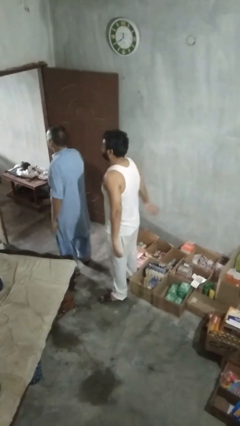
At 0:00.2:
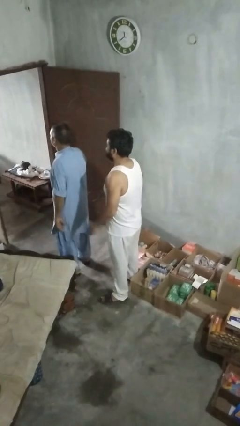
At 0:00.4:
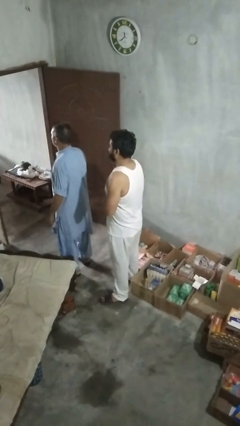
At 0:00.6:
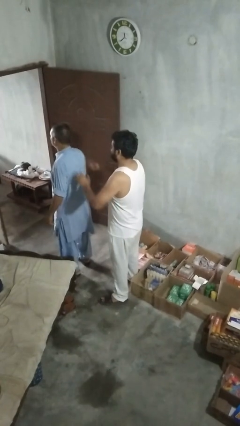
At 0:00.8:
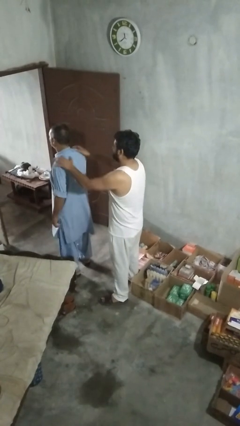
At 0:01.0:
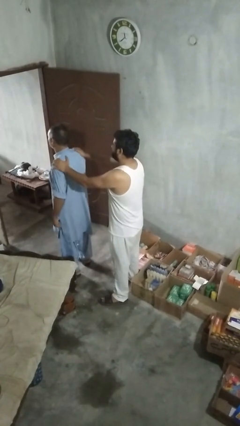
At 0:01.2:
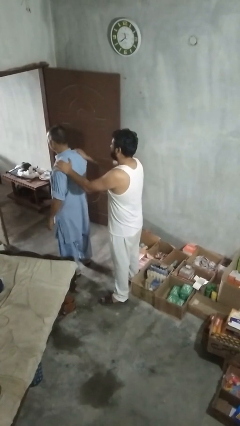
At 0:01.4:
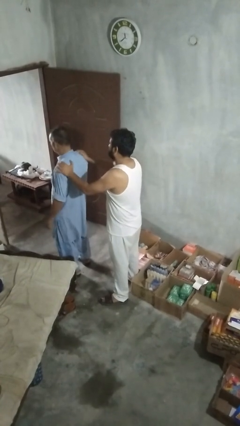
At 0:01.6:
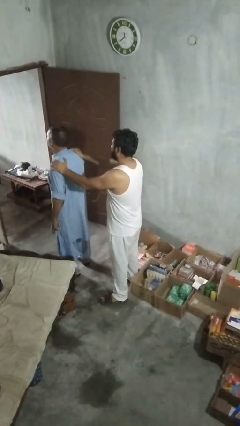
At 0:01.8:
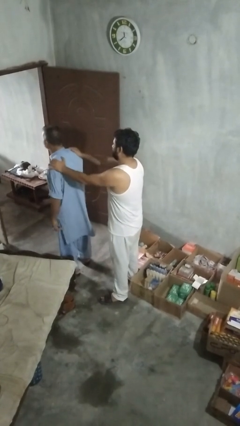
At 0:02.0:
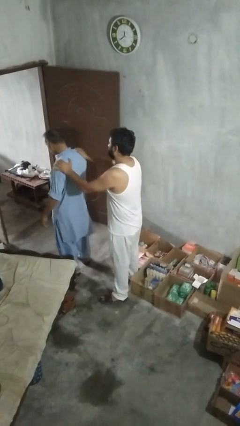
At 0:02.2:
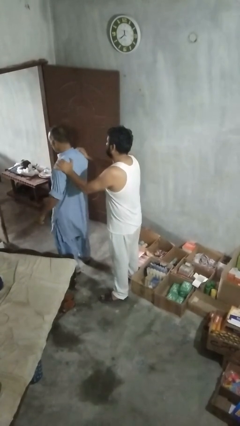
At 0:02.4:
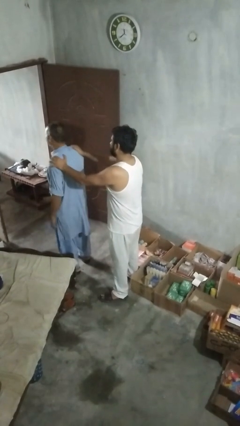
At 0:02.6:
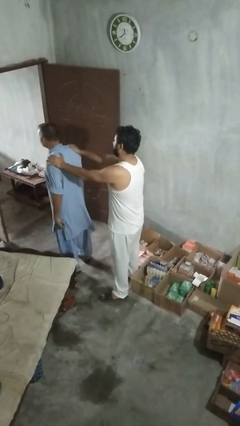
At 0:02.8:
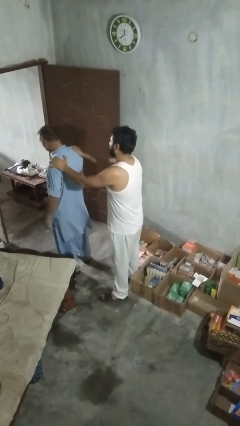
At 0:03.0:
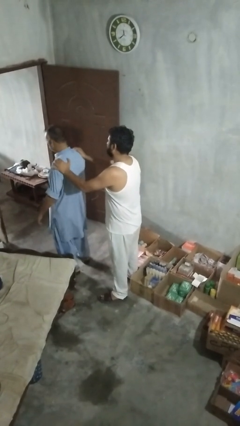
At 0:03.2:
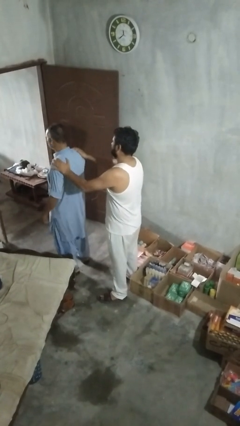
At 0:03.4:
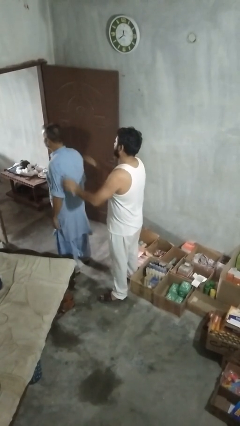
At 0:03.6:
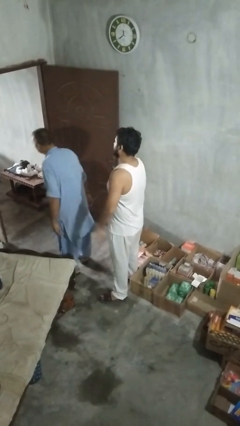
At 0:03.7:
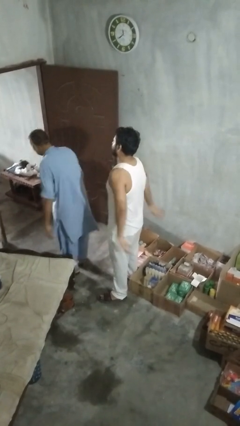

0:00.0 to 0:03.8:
person pounds shoulders of person

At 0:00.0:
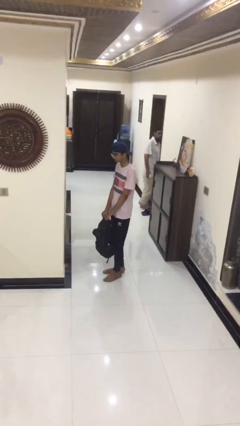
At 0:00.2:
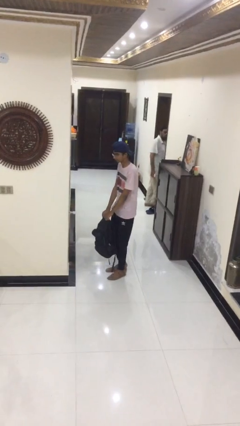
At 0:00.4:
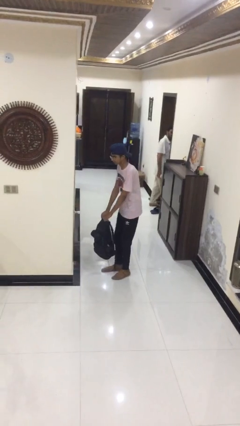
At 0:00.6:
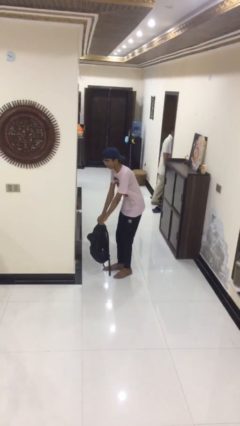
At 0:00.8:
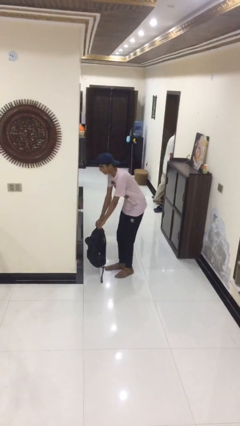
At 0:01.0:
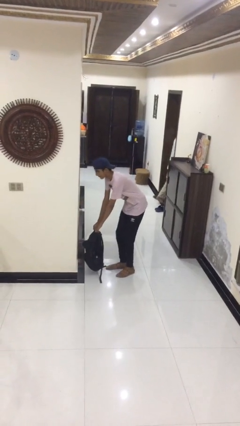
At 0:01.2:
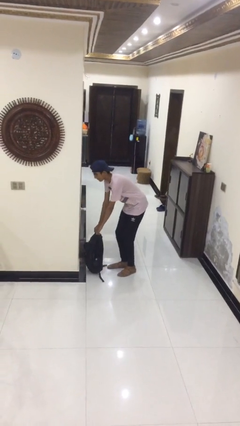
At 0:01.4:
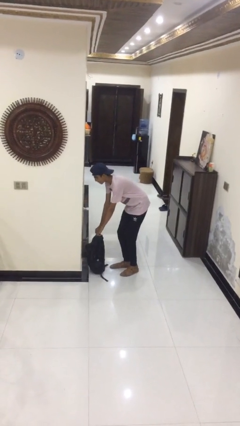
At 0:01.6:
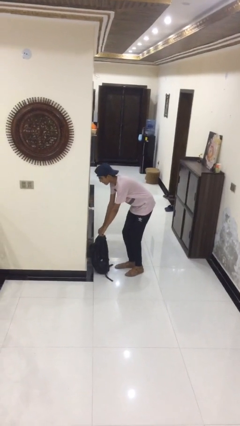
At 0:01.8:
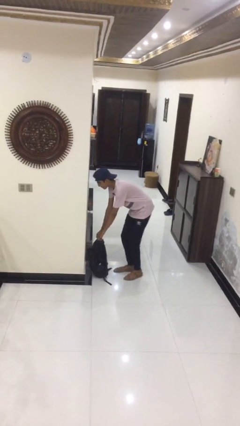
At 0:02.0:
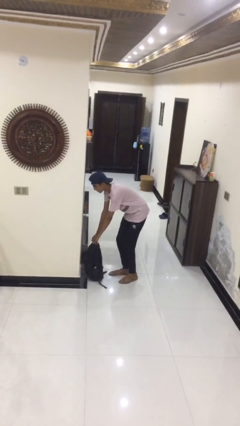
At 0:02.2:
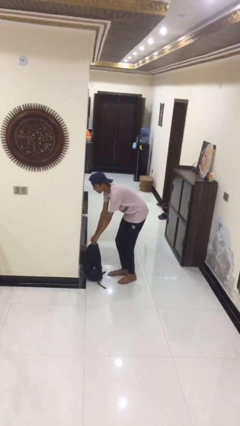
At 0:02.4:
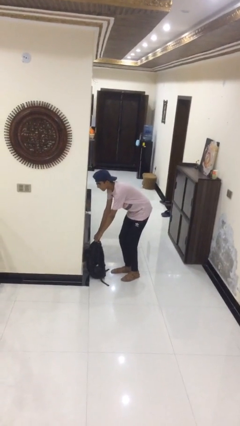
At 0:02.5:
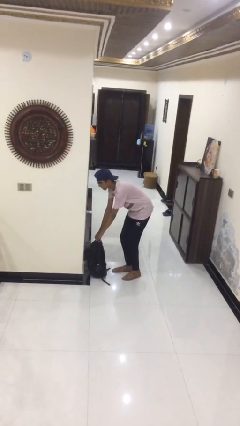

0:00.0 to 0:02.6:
person puts down object on floor

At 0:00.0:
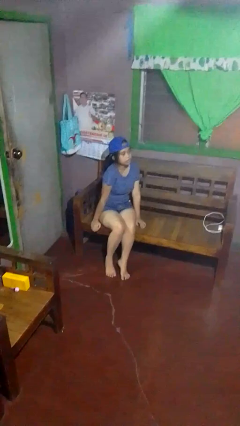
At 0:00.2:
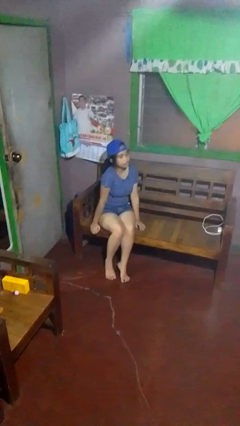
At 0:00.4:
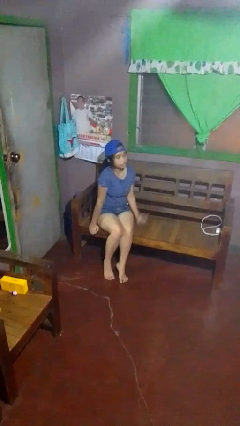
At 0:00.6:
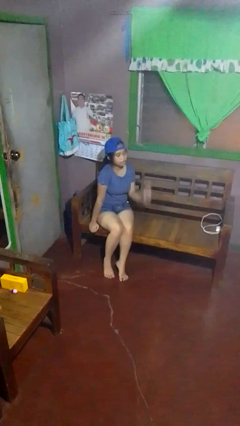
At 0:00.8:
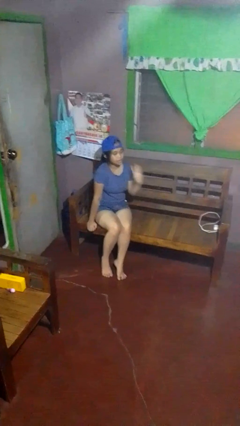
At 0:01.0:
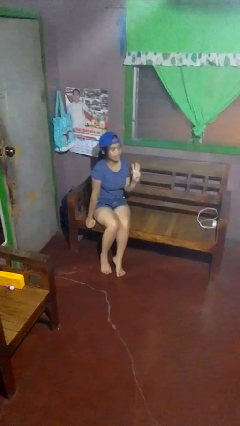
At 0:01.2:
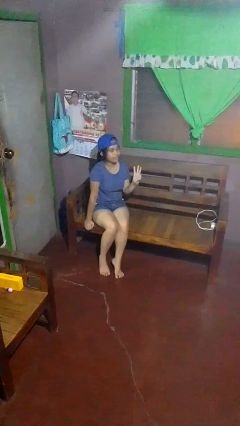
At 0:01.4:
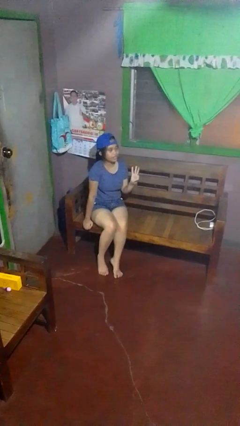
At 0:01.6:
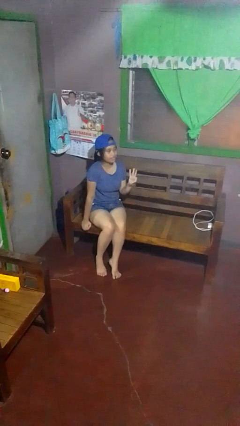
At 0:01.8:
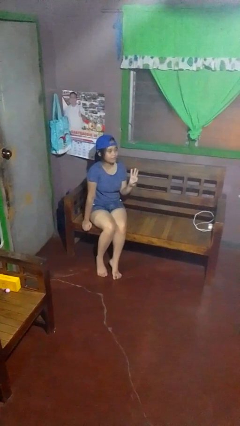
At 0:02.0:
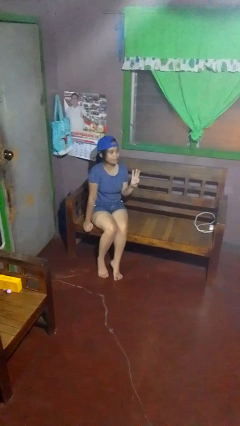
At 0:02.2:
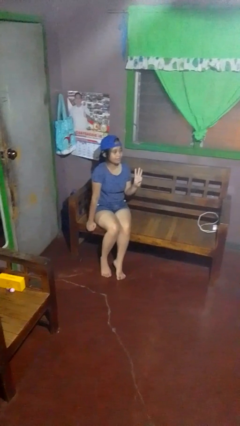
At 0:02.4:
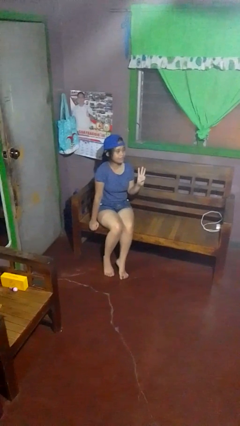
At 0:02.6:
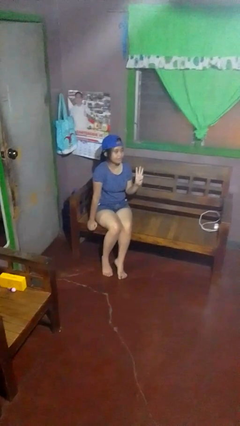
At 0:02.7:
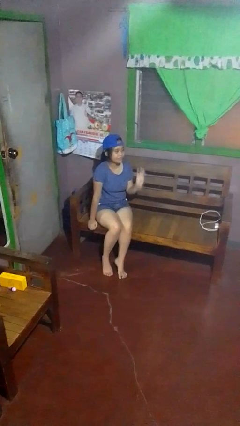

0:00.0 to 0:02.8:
person gestures number three

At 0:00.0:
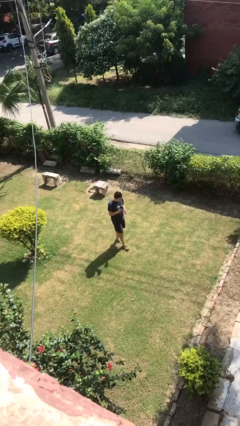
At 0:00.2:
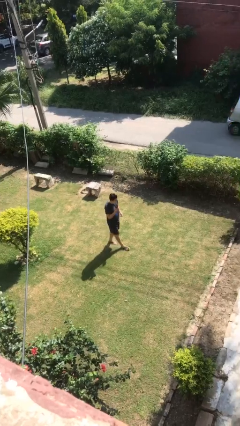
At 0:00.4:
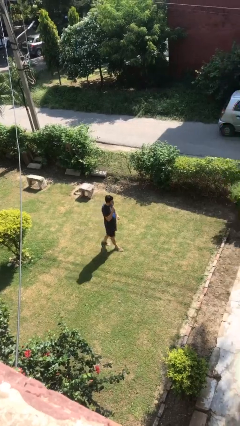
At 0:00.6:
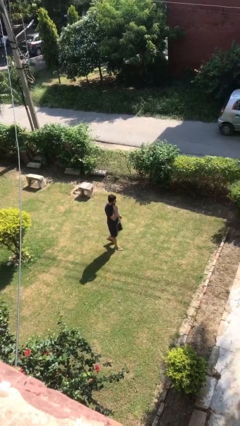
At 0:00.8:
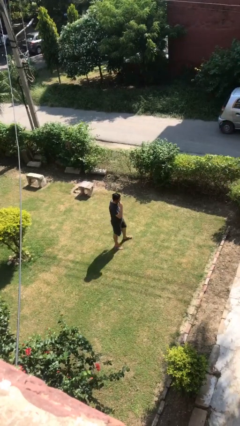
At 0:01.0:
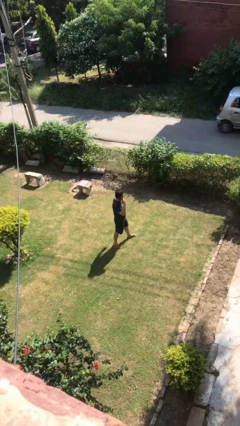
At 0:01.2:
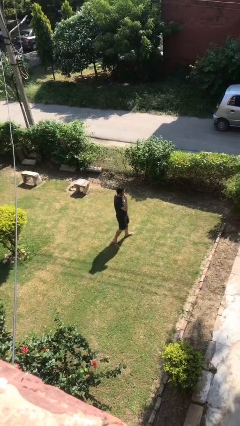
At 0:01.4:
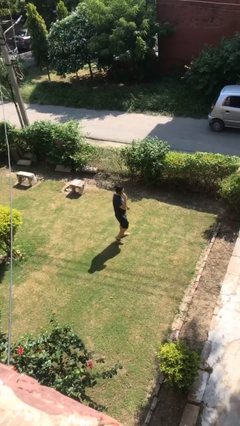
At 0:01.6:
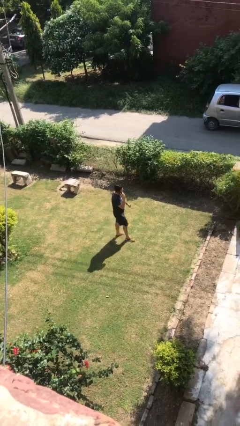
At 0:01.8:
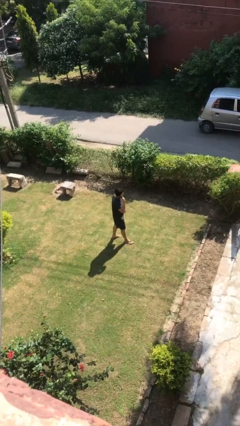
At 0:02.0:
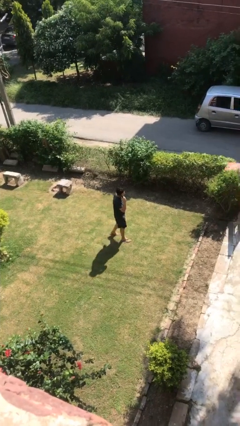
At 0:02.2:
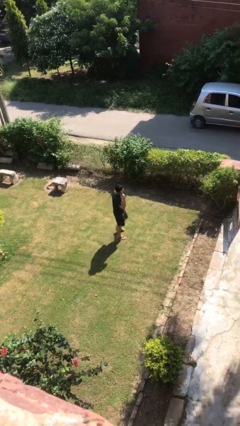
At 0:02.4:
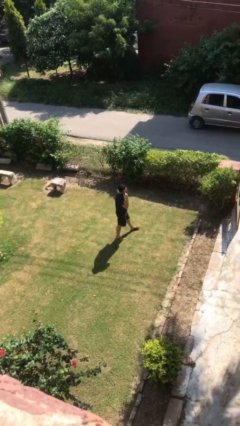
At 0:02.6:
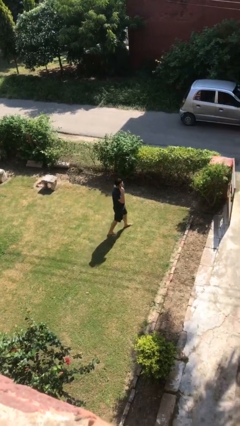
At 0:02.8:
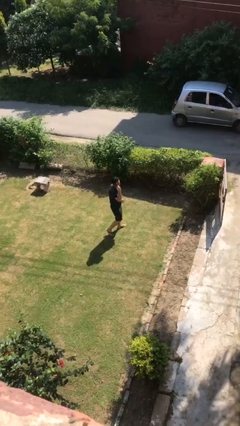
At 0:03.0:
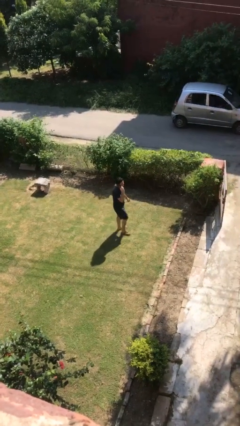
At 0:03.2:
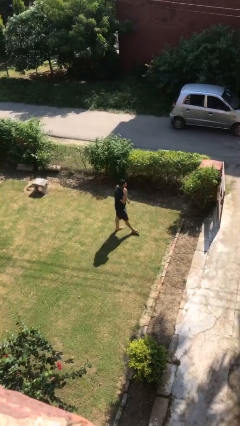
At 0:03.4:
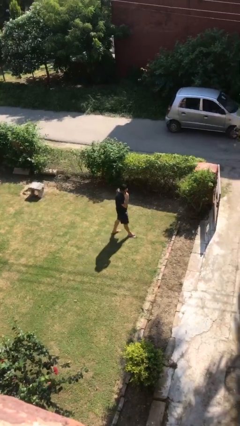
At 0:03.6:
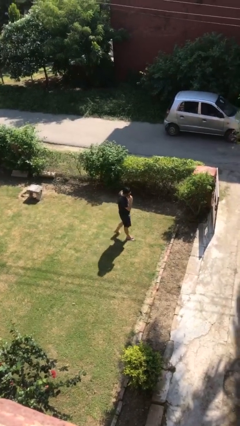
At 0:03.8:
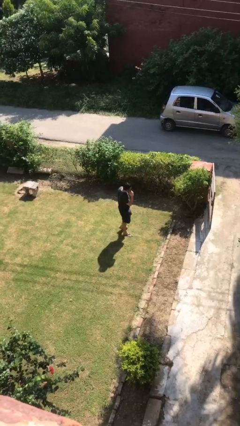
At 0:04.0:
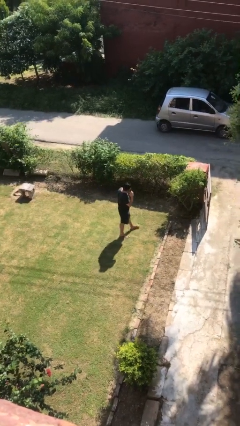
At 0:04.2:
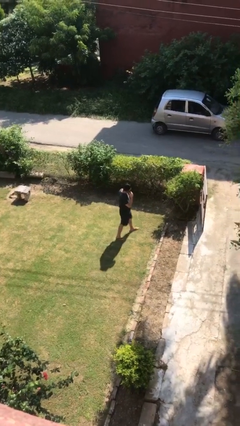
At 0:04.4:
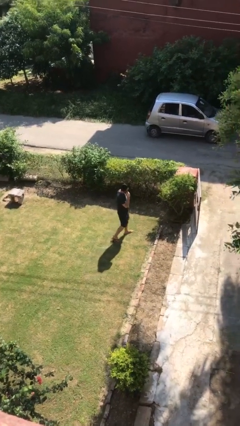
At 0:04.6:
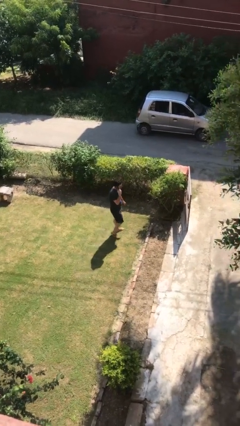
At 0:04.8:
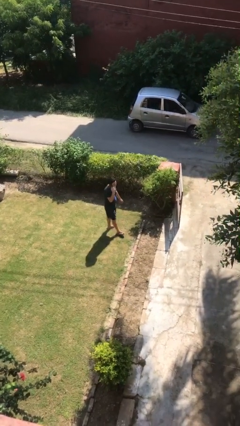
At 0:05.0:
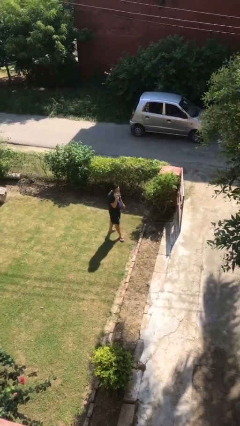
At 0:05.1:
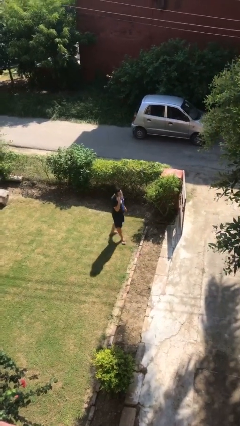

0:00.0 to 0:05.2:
person talks on phone

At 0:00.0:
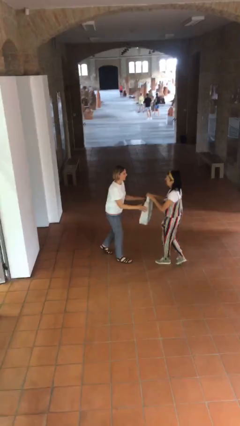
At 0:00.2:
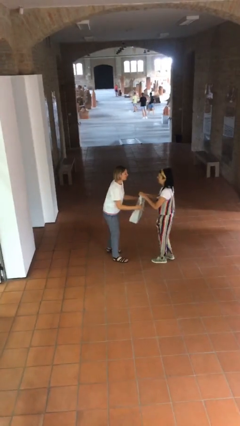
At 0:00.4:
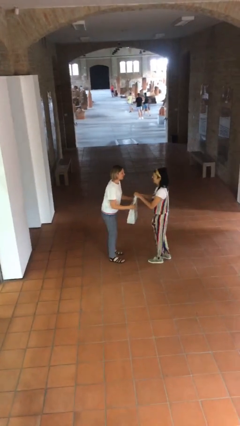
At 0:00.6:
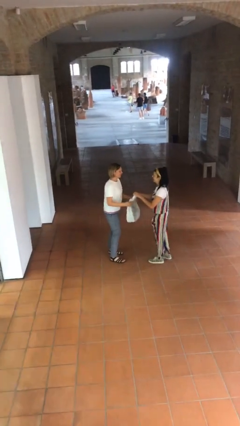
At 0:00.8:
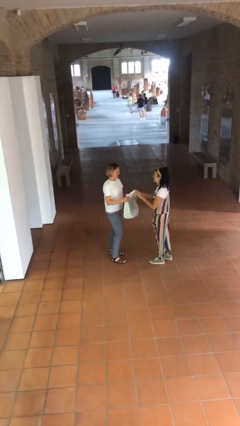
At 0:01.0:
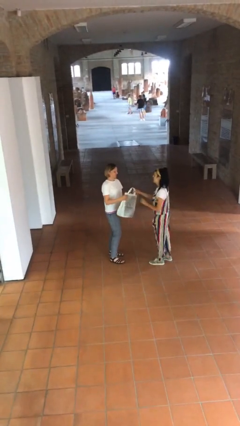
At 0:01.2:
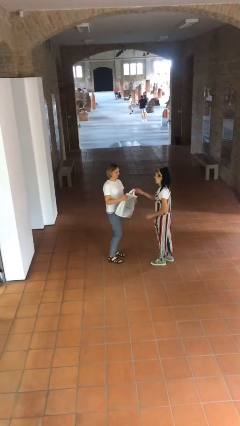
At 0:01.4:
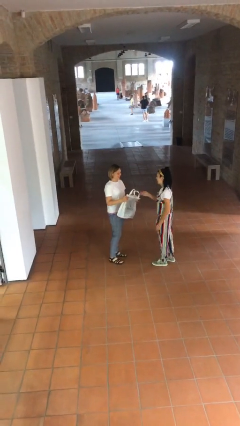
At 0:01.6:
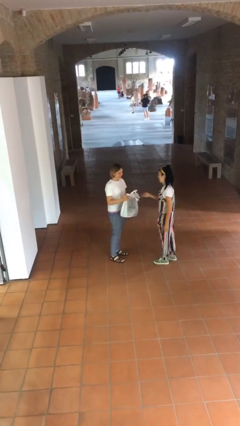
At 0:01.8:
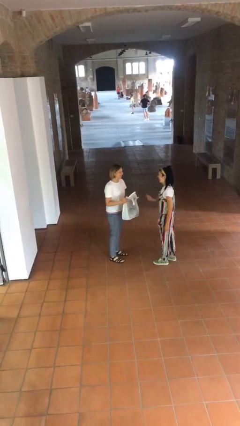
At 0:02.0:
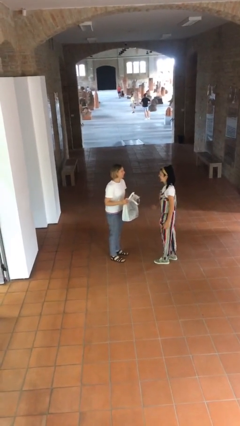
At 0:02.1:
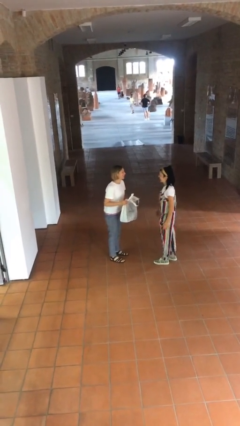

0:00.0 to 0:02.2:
person transfers object to person

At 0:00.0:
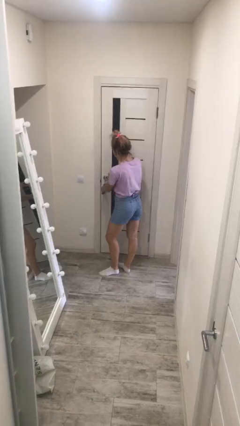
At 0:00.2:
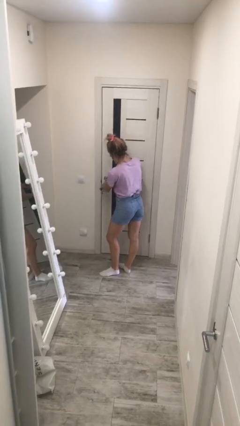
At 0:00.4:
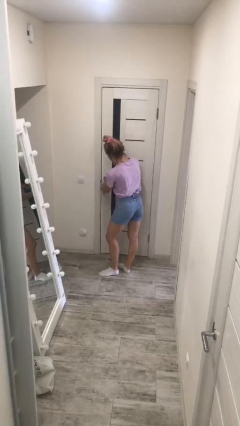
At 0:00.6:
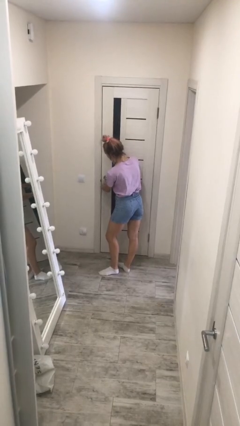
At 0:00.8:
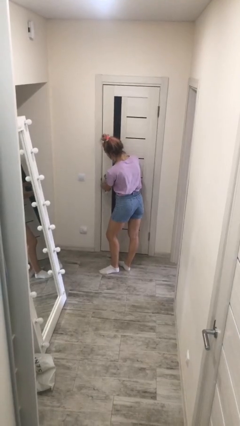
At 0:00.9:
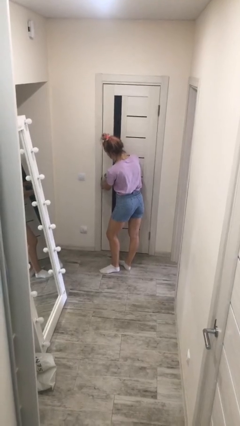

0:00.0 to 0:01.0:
person unlocks door with keys
